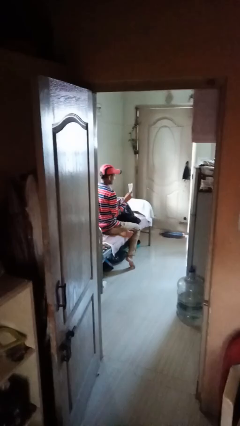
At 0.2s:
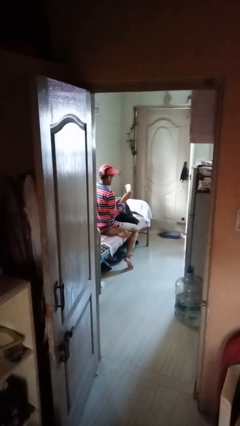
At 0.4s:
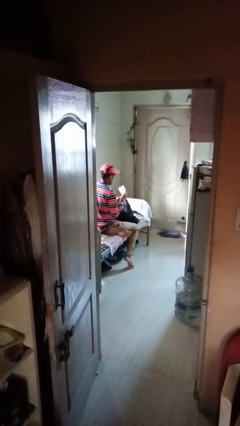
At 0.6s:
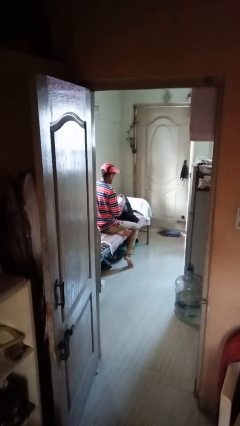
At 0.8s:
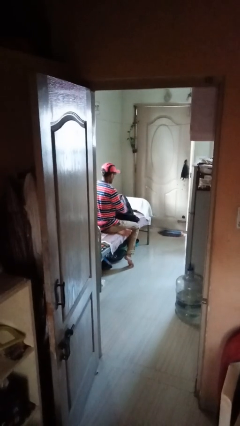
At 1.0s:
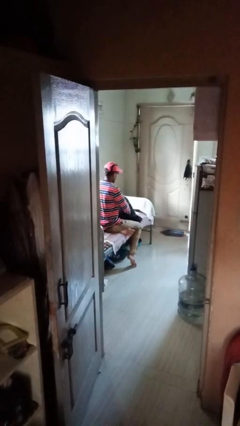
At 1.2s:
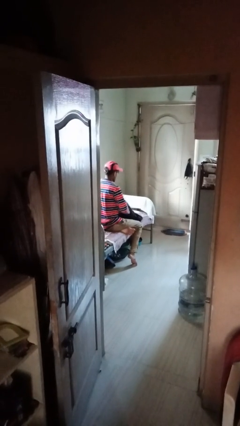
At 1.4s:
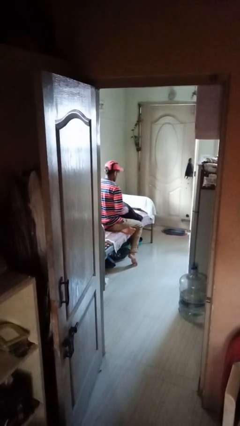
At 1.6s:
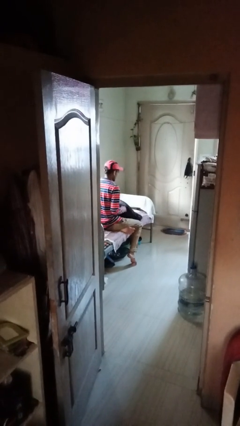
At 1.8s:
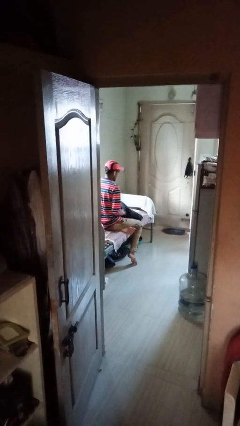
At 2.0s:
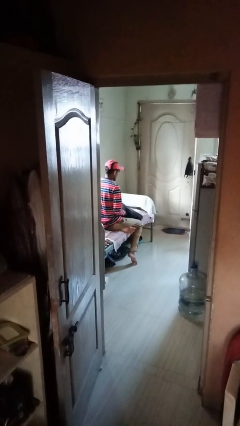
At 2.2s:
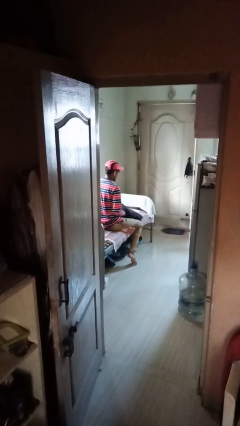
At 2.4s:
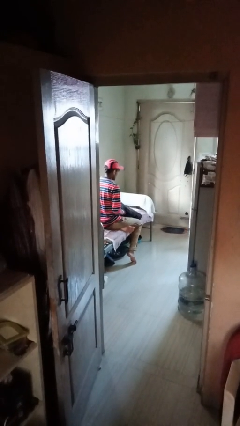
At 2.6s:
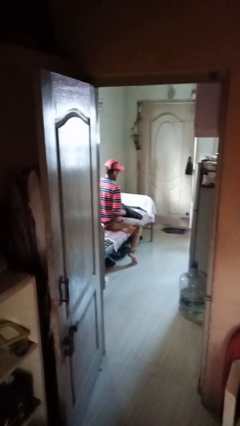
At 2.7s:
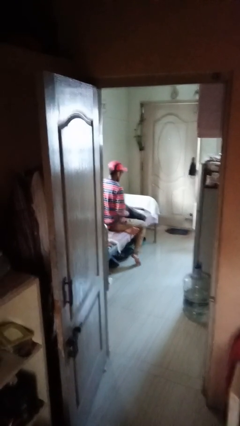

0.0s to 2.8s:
person puts object into backpack

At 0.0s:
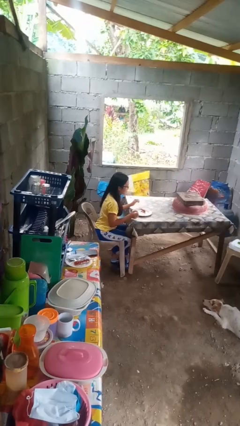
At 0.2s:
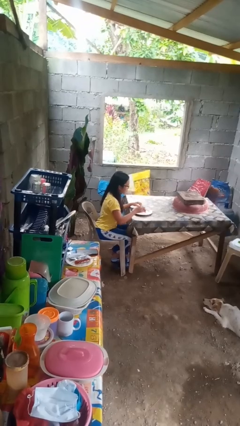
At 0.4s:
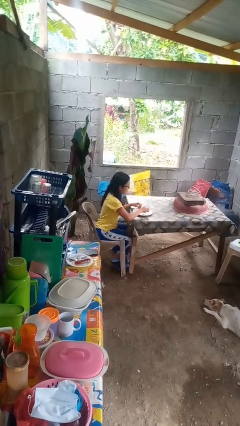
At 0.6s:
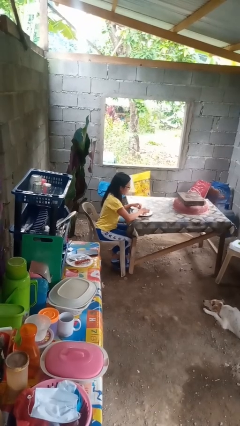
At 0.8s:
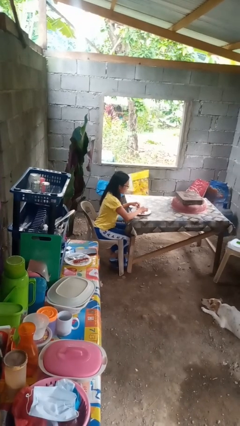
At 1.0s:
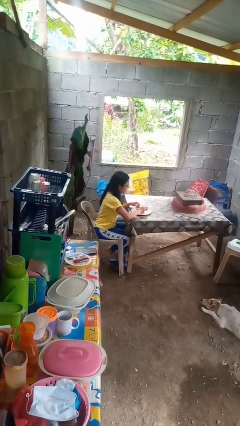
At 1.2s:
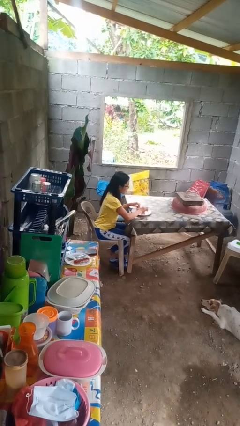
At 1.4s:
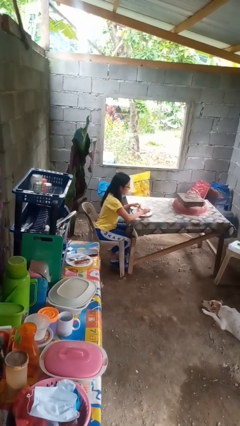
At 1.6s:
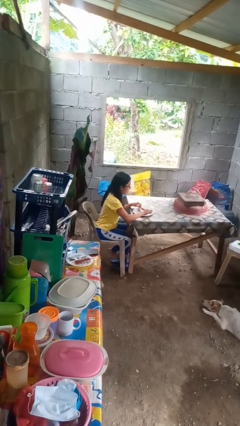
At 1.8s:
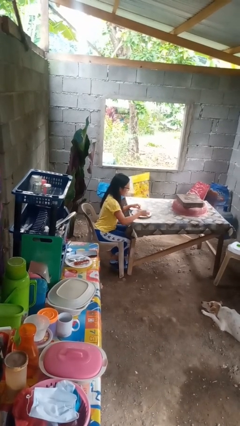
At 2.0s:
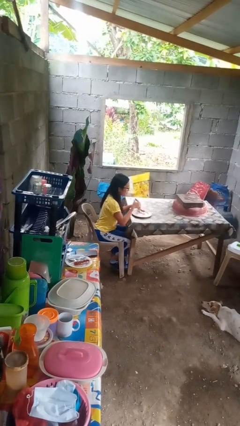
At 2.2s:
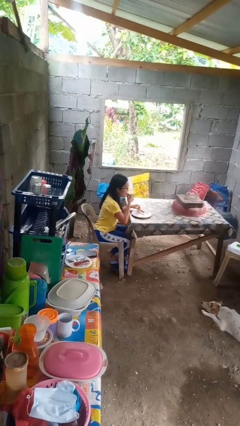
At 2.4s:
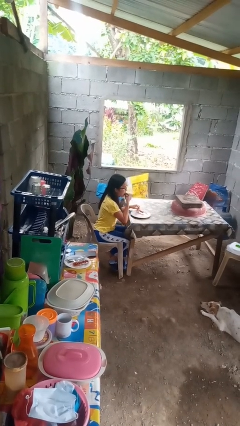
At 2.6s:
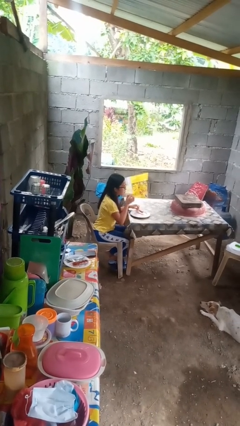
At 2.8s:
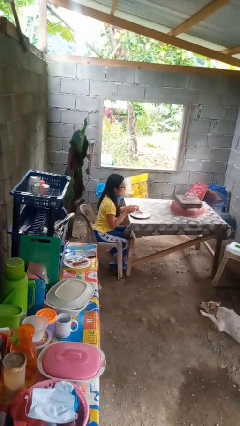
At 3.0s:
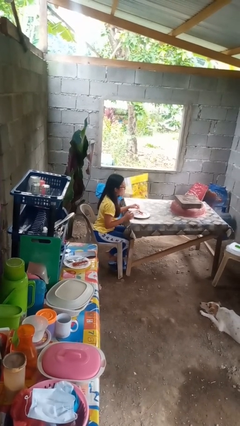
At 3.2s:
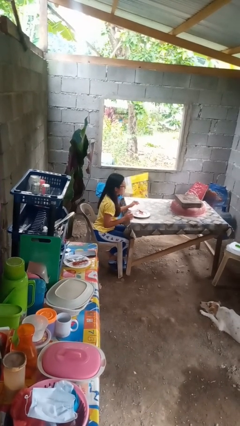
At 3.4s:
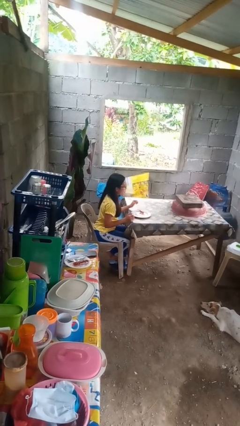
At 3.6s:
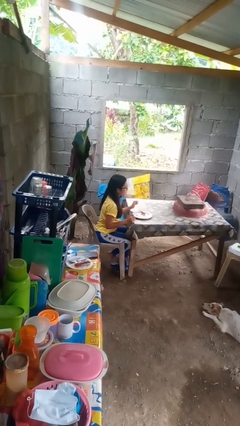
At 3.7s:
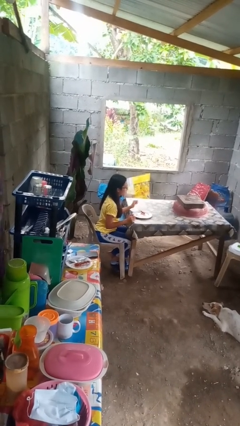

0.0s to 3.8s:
person eats with hands

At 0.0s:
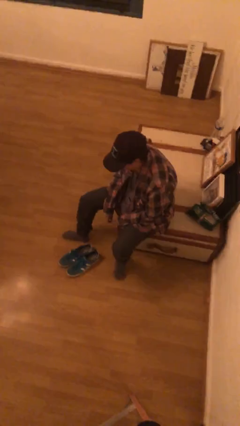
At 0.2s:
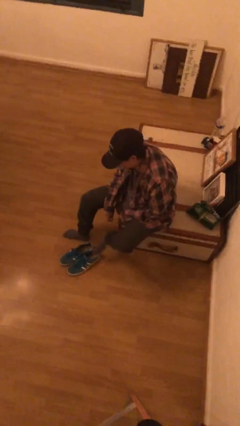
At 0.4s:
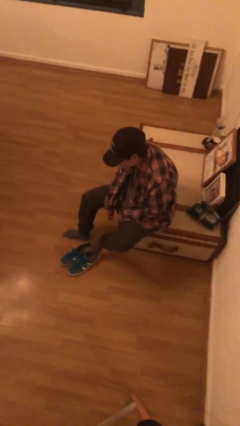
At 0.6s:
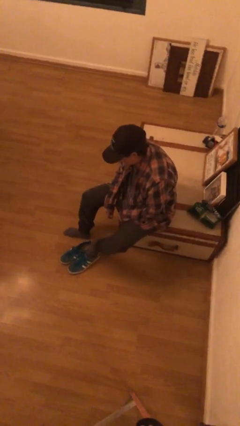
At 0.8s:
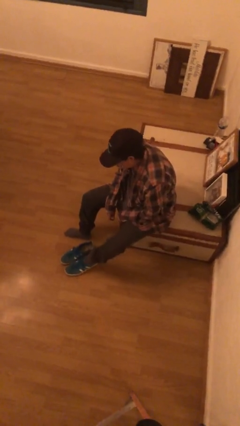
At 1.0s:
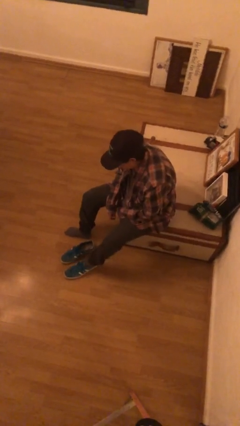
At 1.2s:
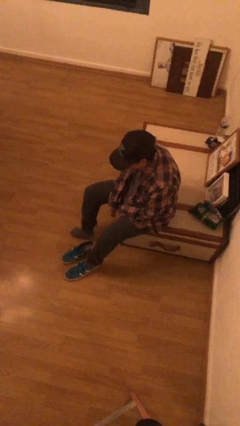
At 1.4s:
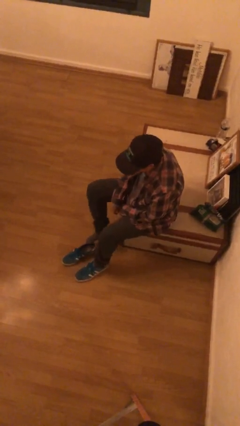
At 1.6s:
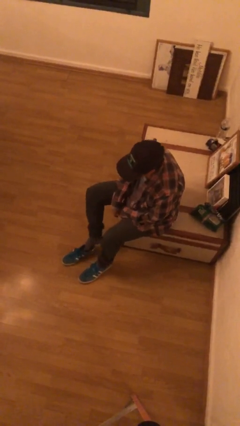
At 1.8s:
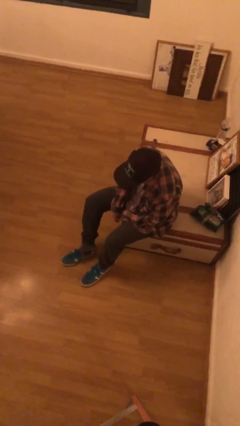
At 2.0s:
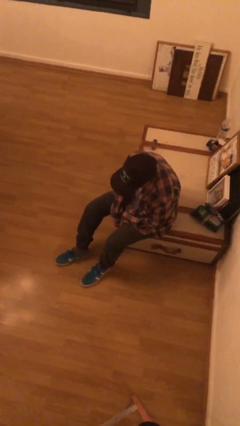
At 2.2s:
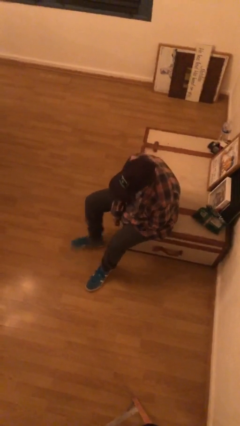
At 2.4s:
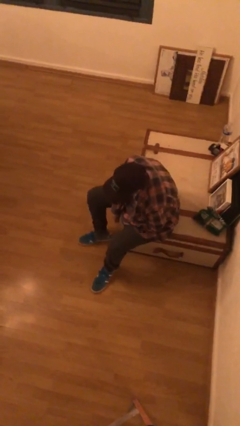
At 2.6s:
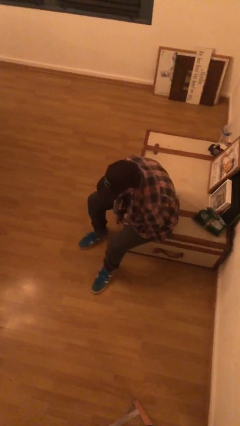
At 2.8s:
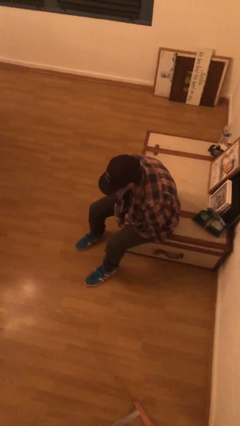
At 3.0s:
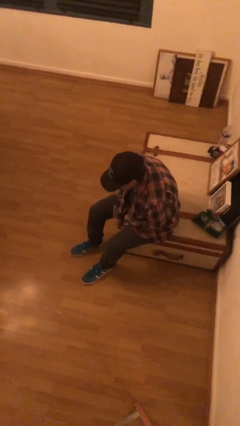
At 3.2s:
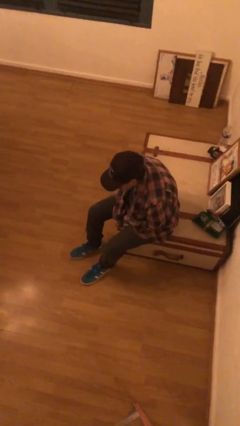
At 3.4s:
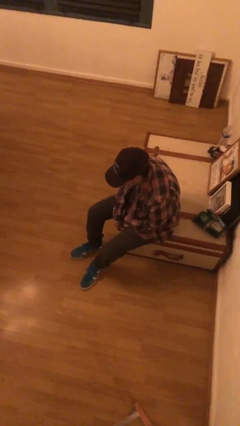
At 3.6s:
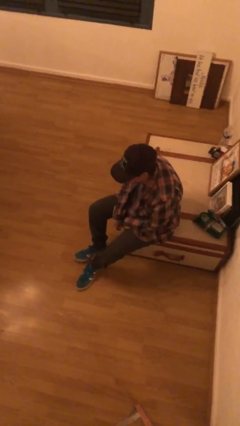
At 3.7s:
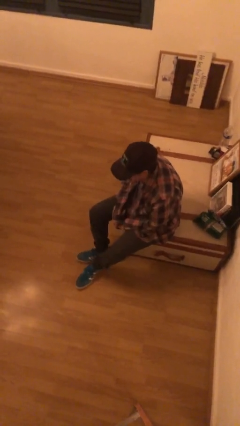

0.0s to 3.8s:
person puts on shoes

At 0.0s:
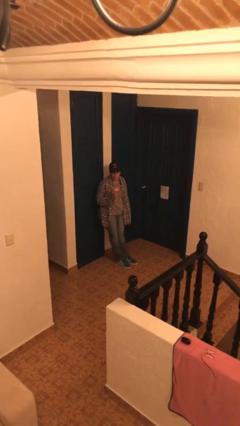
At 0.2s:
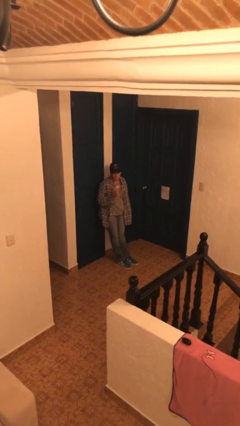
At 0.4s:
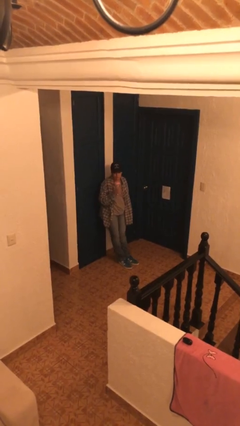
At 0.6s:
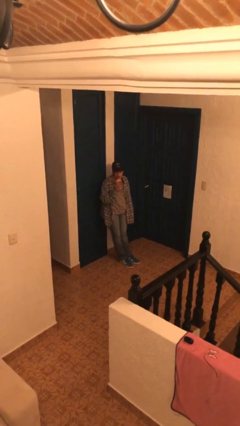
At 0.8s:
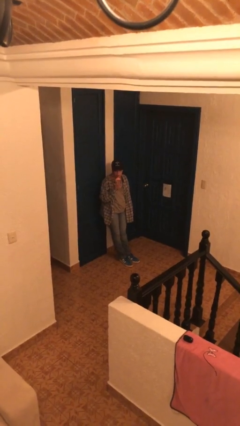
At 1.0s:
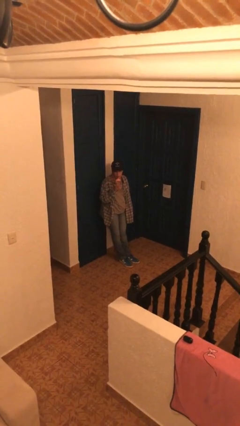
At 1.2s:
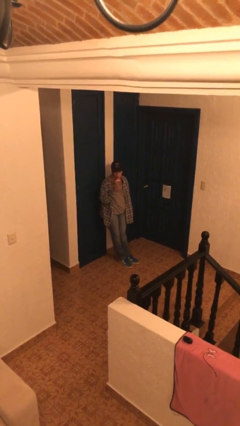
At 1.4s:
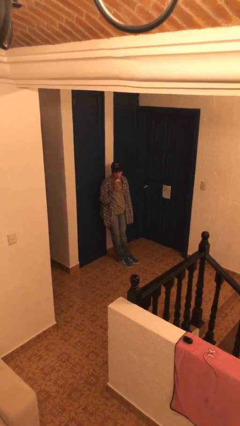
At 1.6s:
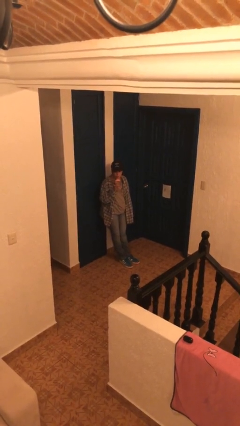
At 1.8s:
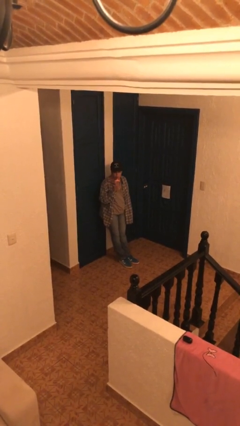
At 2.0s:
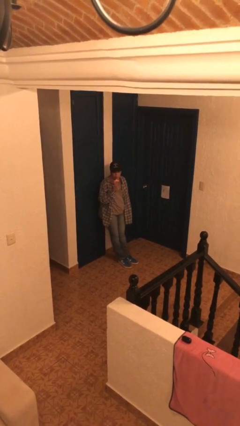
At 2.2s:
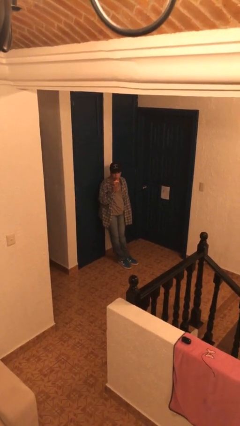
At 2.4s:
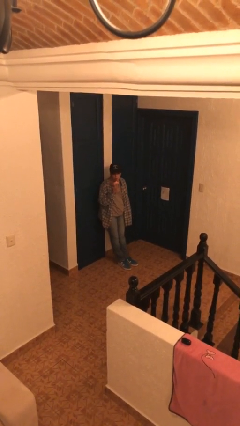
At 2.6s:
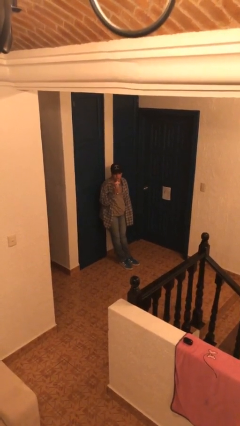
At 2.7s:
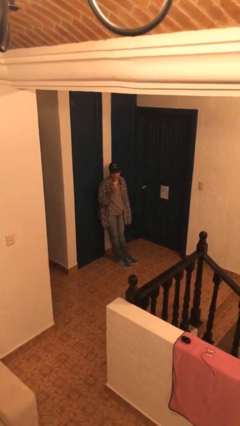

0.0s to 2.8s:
person drinks from straw

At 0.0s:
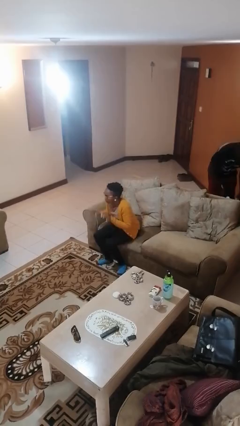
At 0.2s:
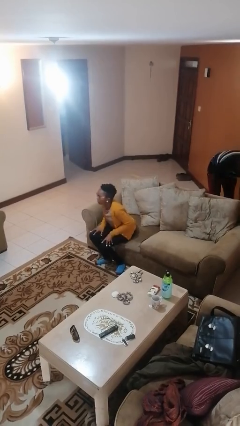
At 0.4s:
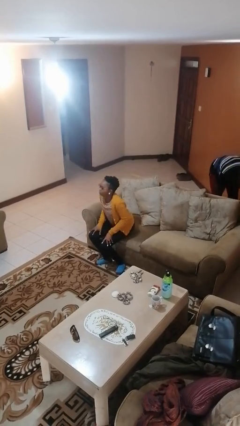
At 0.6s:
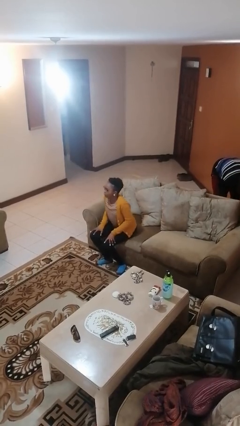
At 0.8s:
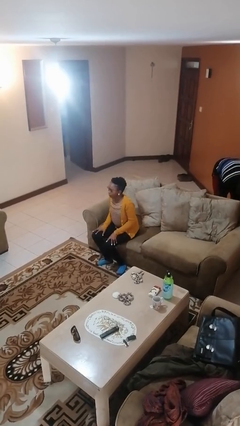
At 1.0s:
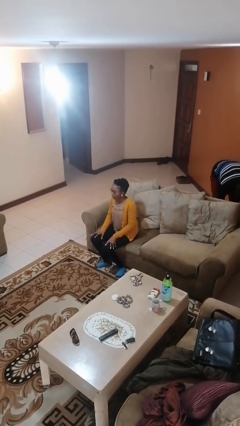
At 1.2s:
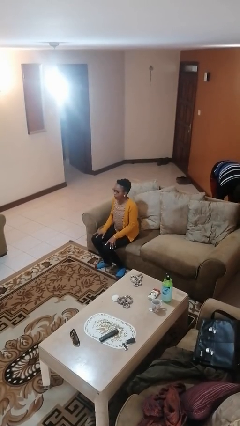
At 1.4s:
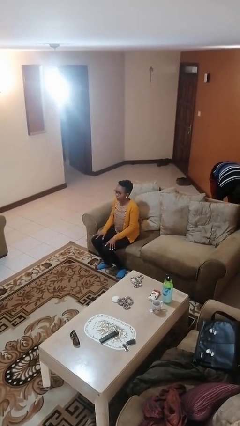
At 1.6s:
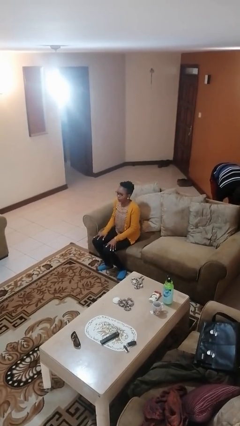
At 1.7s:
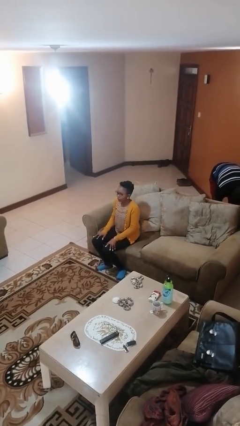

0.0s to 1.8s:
person slaps hands on thighs

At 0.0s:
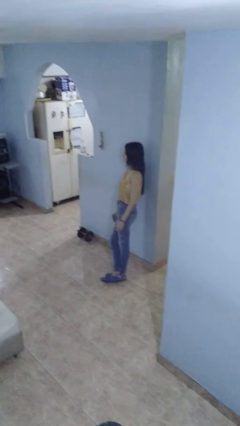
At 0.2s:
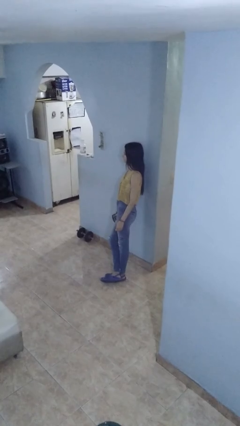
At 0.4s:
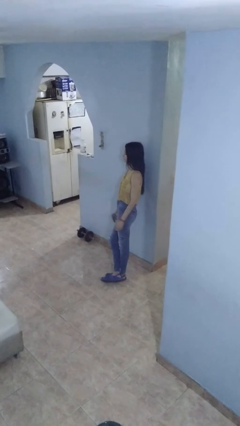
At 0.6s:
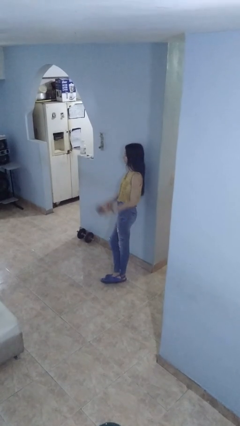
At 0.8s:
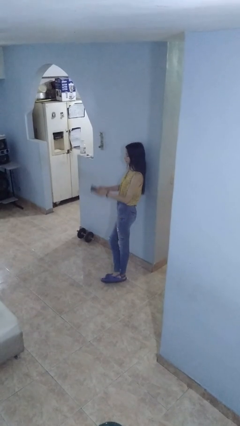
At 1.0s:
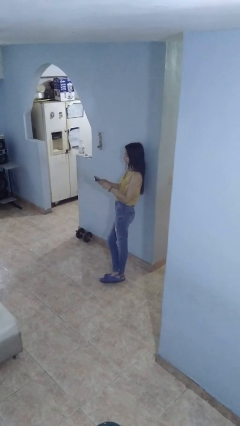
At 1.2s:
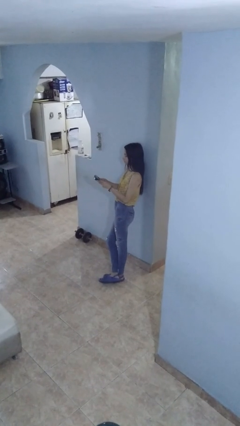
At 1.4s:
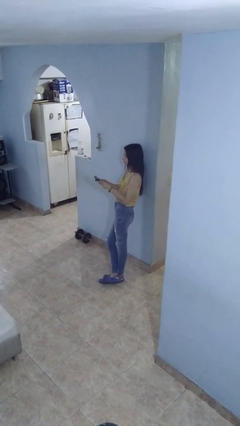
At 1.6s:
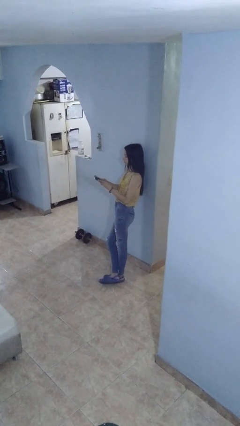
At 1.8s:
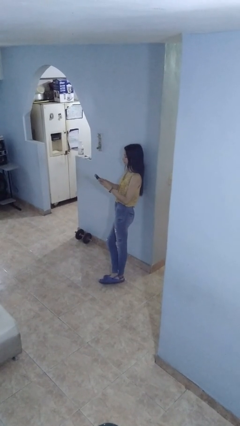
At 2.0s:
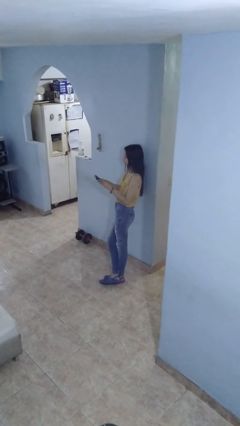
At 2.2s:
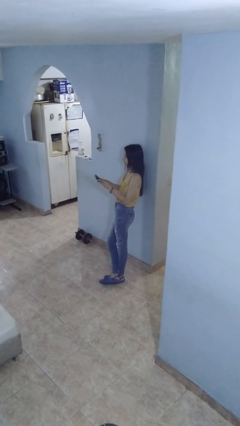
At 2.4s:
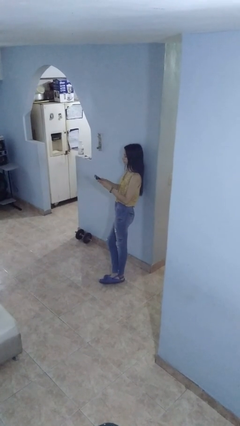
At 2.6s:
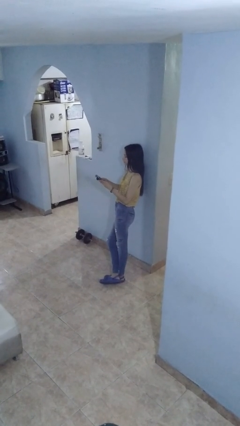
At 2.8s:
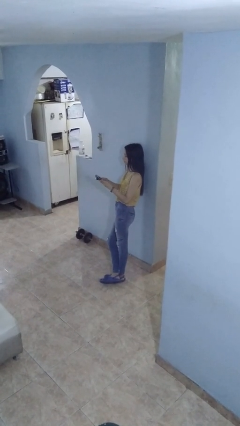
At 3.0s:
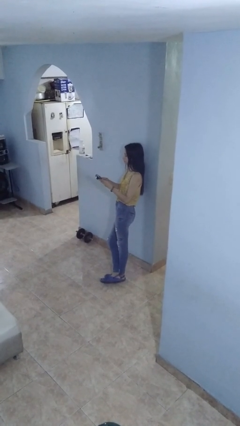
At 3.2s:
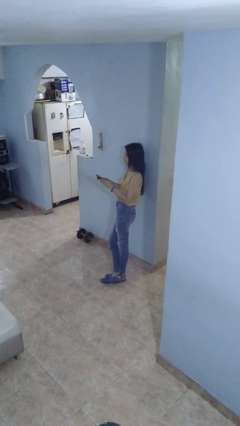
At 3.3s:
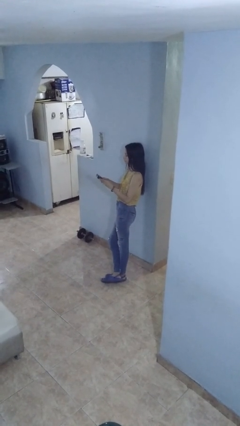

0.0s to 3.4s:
person interacts with handheld game
